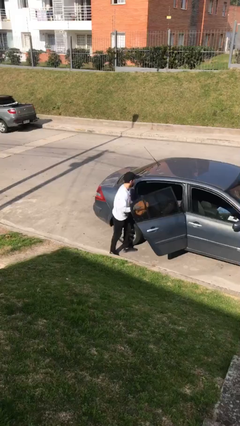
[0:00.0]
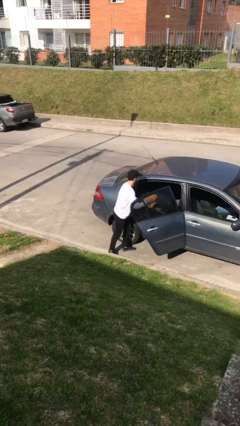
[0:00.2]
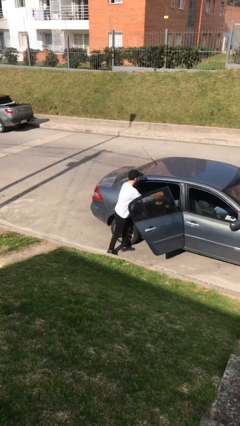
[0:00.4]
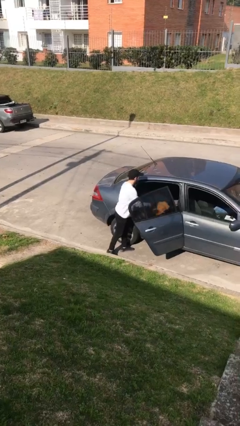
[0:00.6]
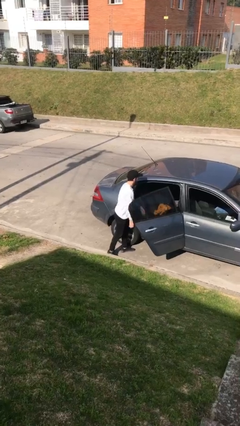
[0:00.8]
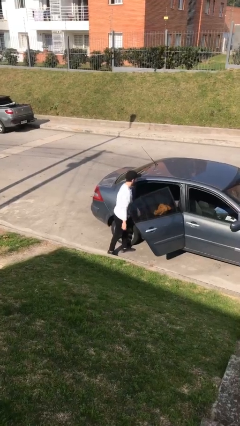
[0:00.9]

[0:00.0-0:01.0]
person loads car

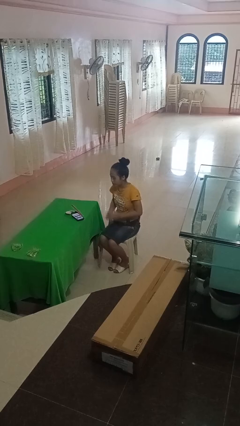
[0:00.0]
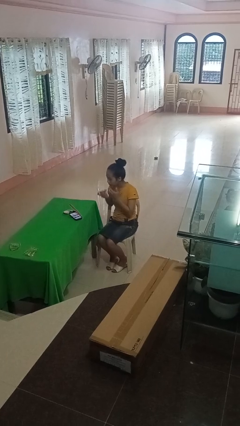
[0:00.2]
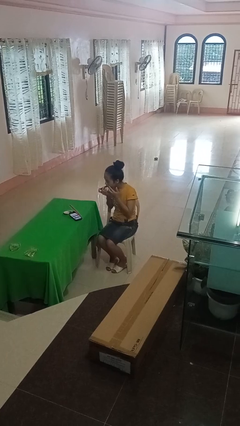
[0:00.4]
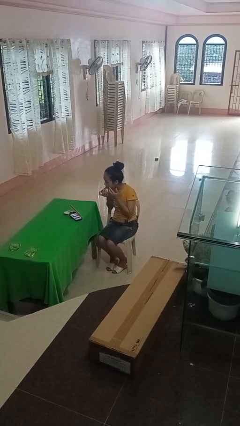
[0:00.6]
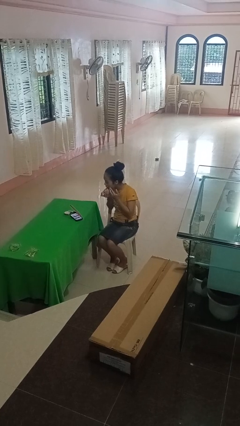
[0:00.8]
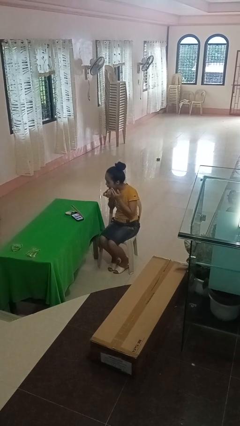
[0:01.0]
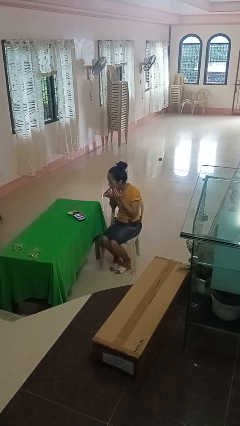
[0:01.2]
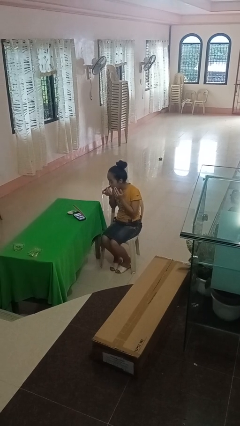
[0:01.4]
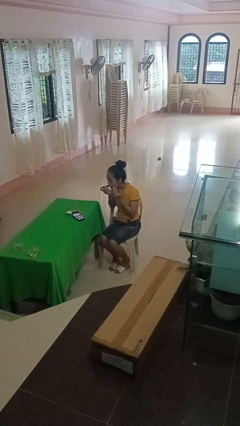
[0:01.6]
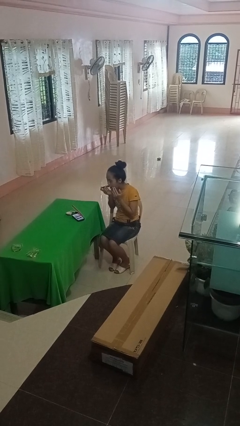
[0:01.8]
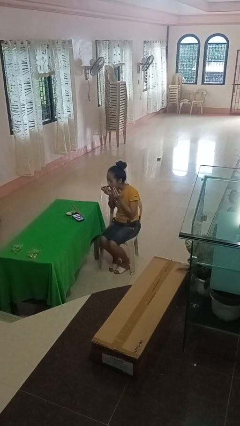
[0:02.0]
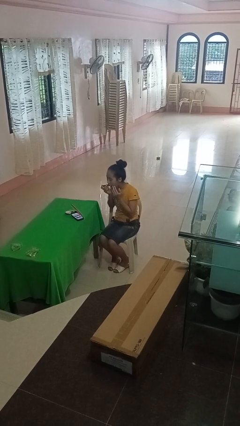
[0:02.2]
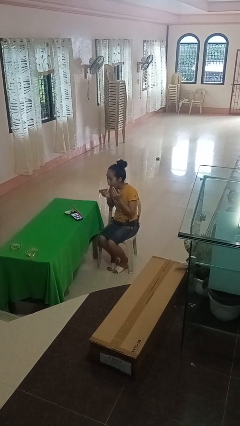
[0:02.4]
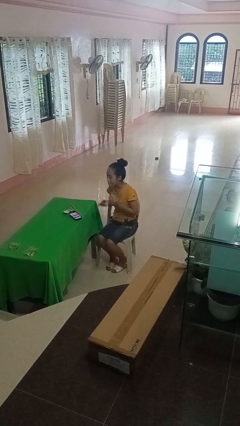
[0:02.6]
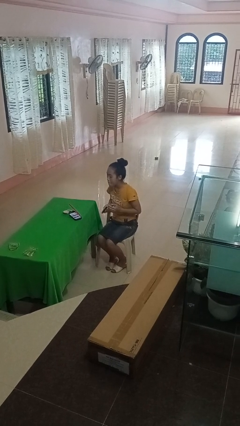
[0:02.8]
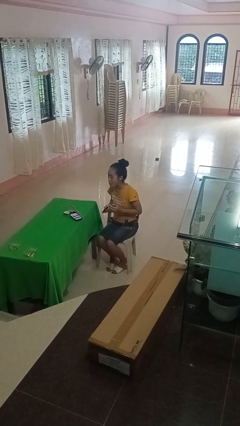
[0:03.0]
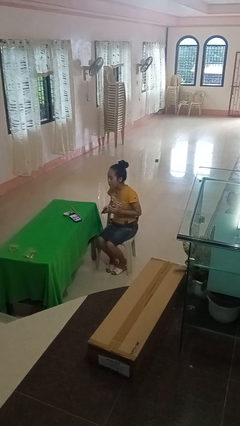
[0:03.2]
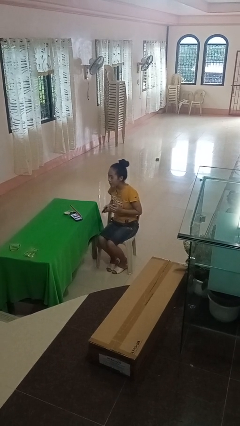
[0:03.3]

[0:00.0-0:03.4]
person applies lip makeup

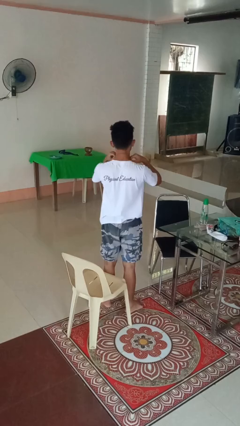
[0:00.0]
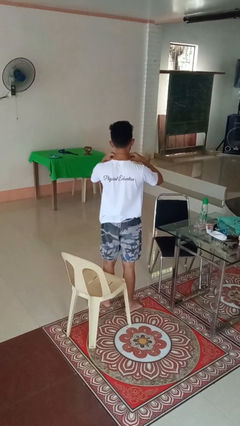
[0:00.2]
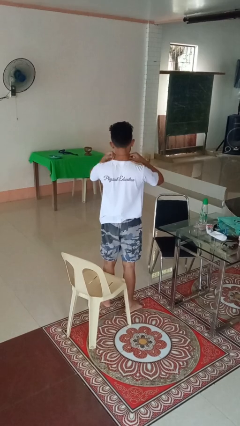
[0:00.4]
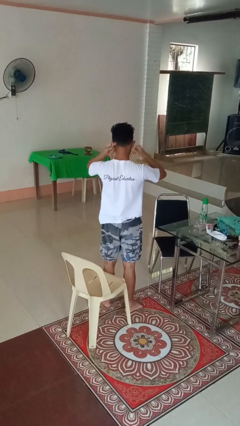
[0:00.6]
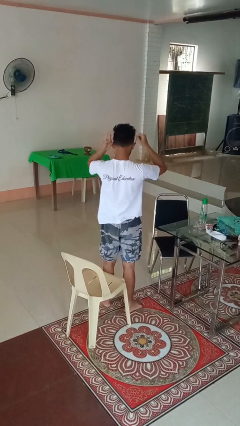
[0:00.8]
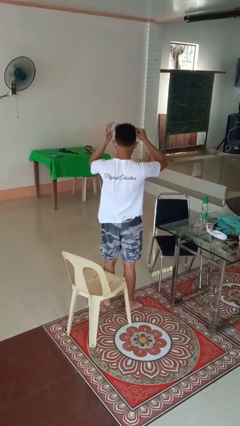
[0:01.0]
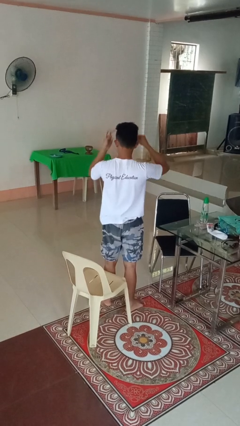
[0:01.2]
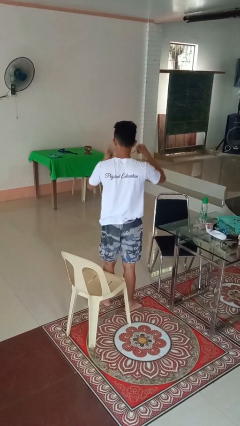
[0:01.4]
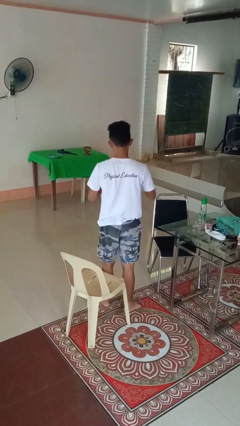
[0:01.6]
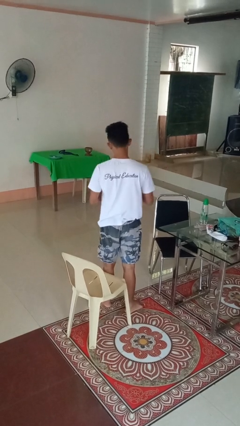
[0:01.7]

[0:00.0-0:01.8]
person takes off necklace

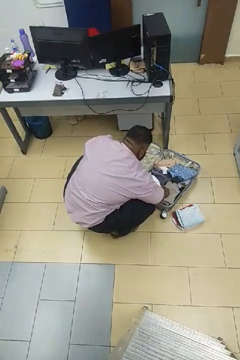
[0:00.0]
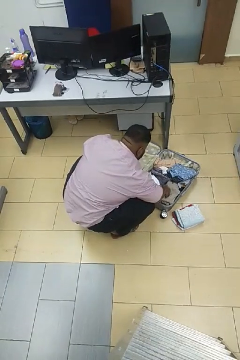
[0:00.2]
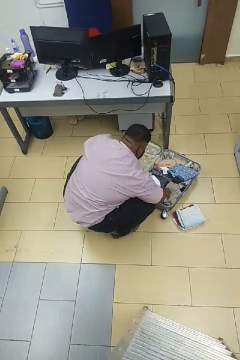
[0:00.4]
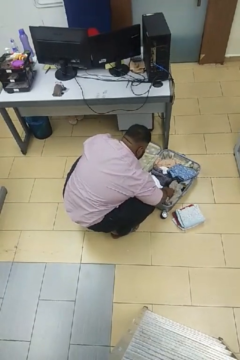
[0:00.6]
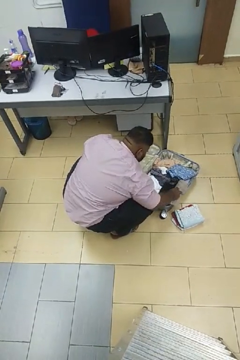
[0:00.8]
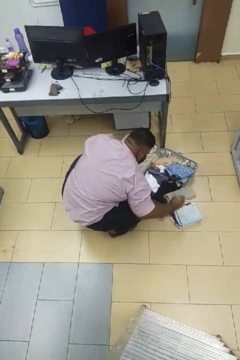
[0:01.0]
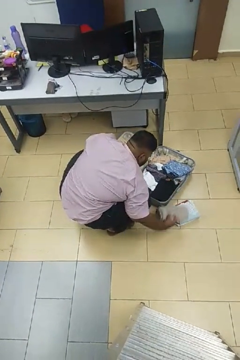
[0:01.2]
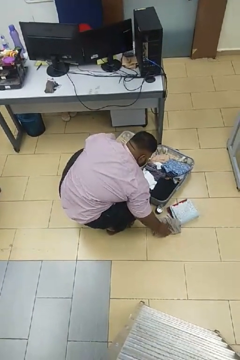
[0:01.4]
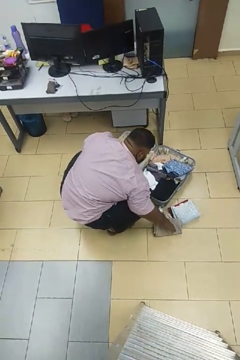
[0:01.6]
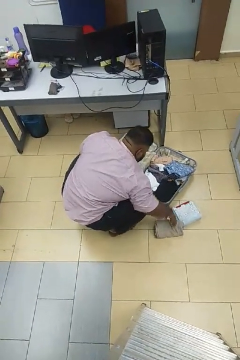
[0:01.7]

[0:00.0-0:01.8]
person unloads clothes from suitcase

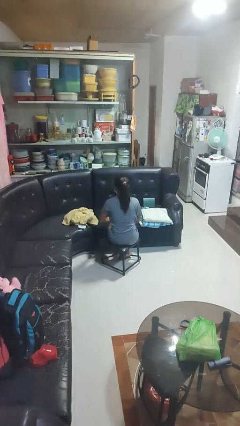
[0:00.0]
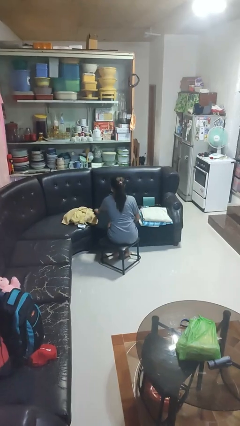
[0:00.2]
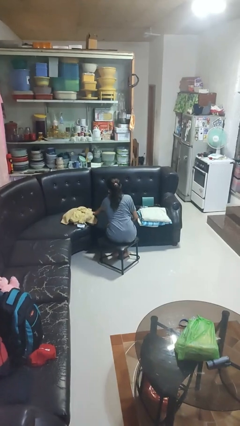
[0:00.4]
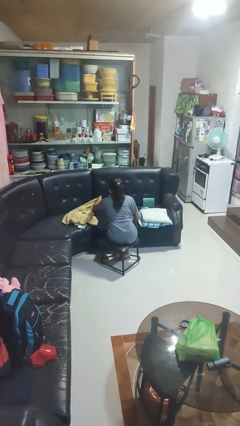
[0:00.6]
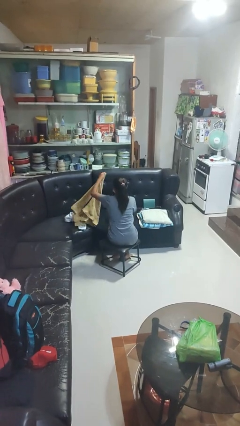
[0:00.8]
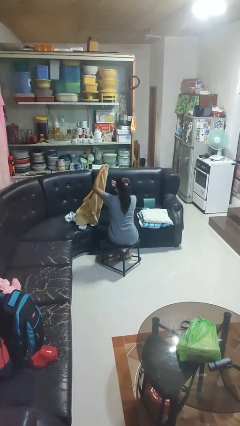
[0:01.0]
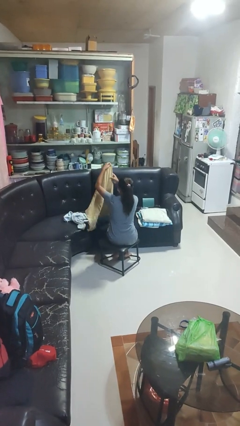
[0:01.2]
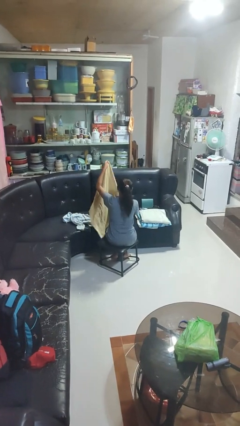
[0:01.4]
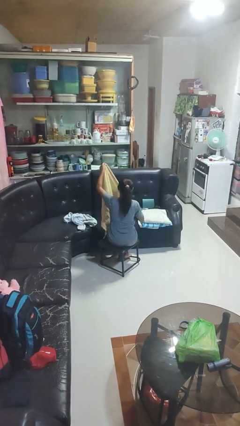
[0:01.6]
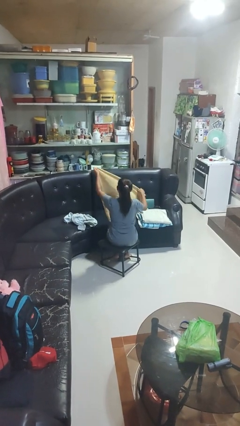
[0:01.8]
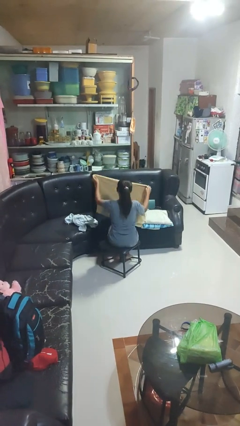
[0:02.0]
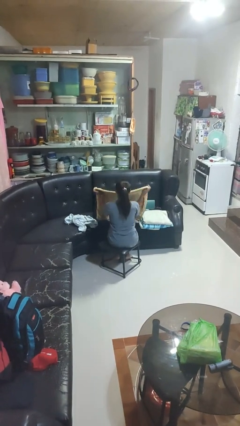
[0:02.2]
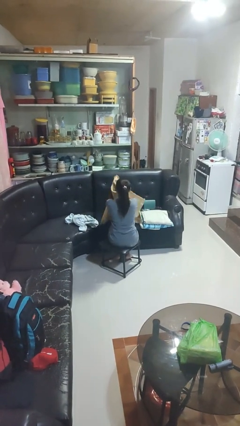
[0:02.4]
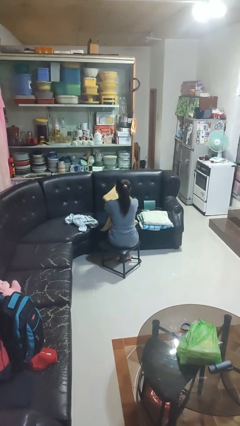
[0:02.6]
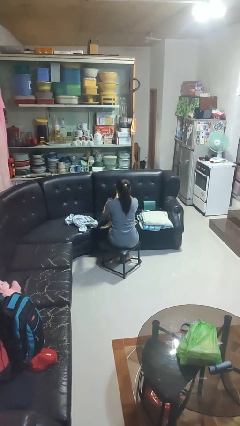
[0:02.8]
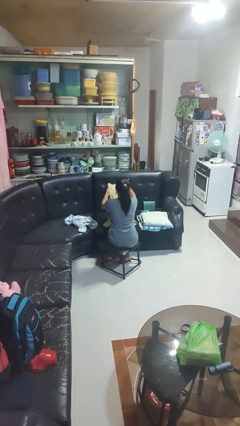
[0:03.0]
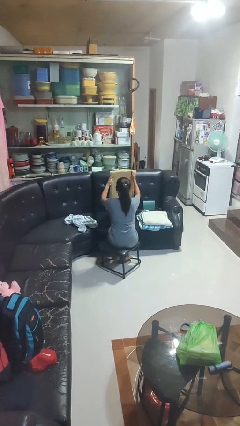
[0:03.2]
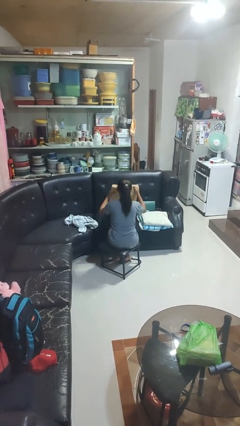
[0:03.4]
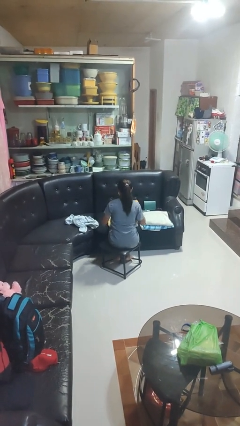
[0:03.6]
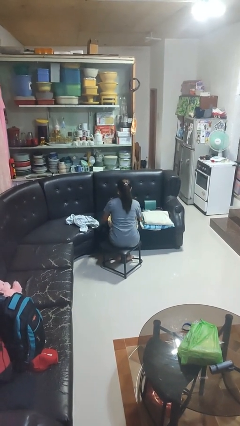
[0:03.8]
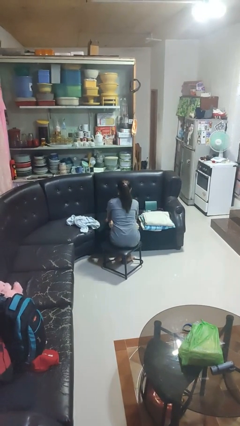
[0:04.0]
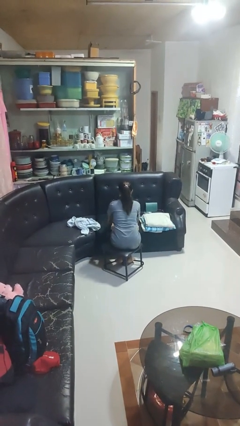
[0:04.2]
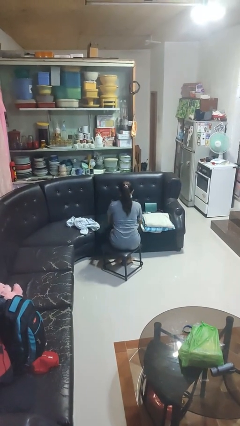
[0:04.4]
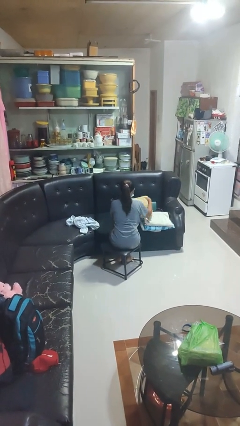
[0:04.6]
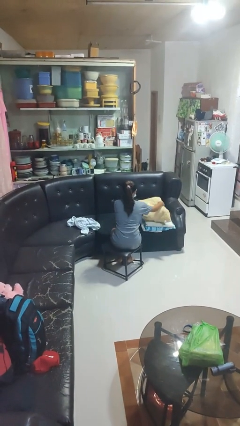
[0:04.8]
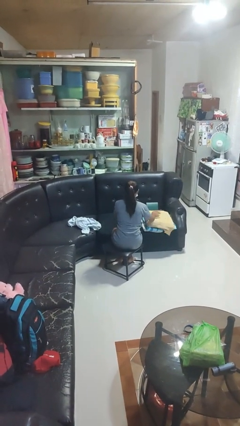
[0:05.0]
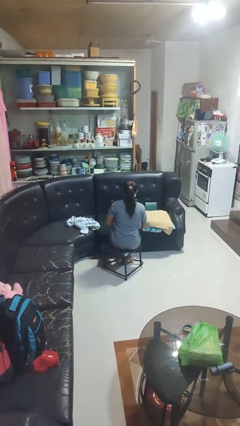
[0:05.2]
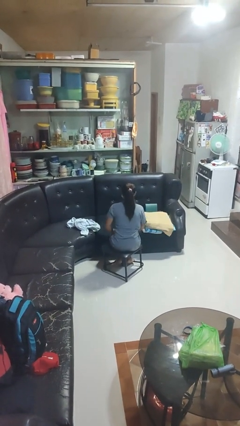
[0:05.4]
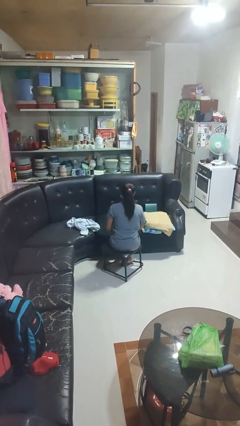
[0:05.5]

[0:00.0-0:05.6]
person folds towel

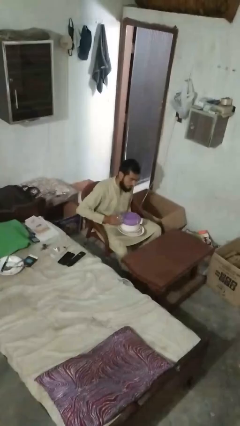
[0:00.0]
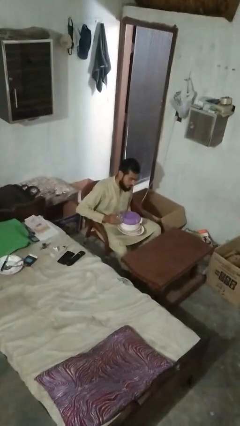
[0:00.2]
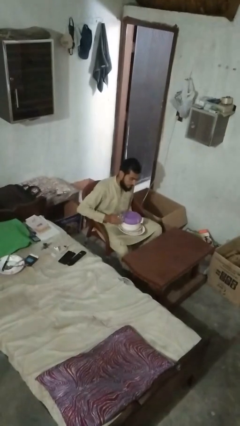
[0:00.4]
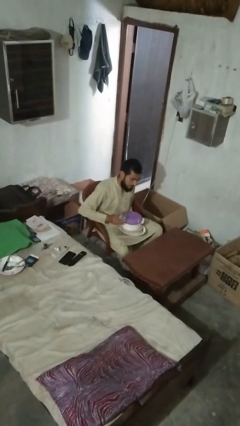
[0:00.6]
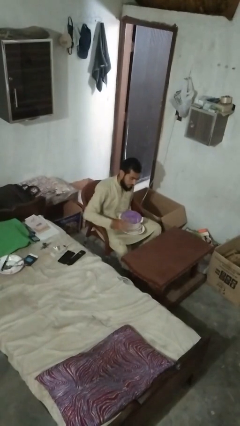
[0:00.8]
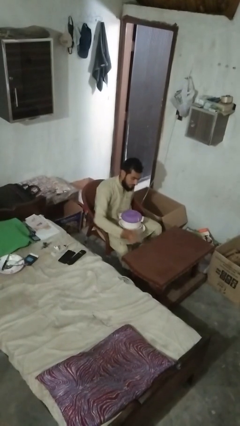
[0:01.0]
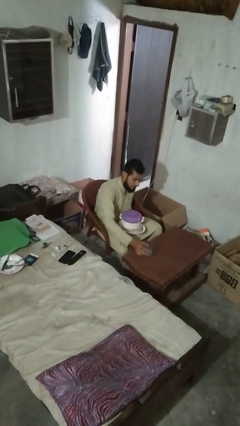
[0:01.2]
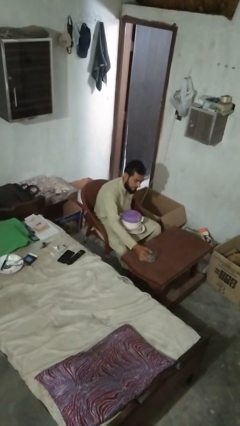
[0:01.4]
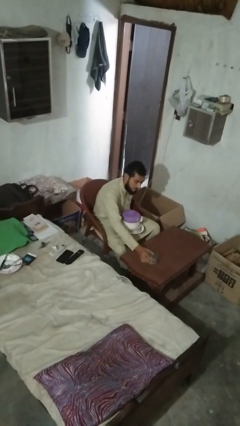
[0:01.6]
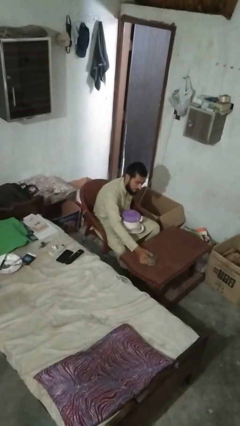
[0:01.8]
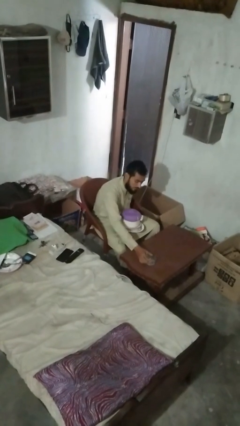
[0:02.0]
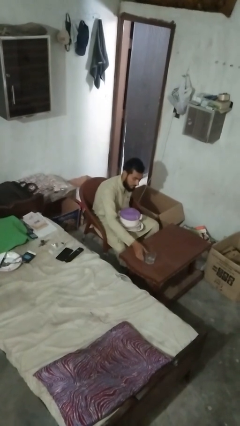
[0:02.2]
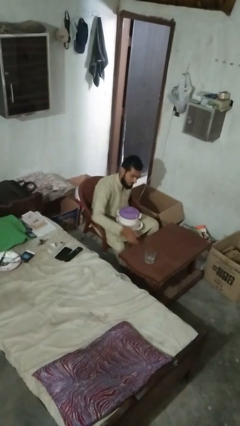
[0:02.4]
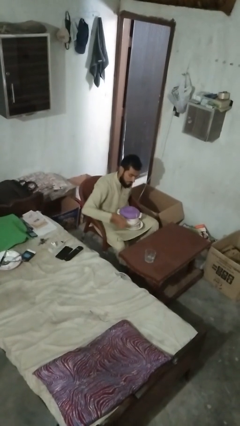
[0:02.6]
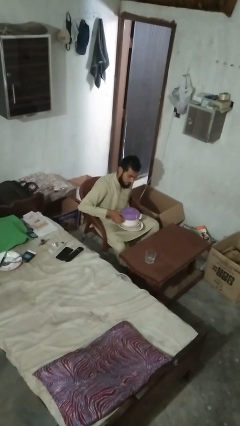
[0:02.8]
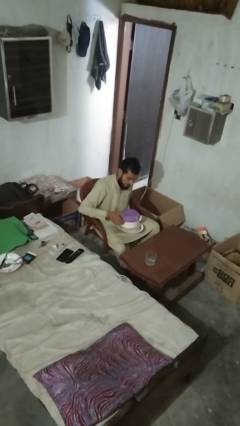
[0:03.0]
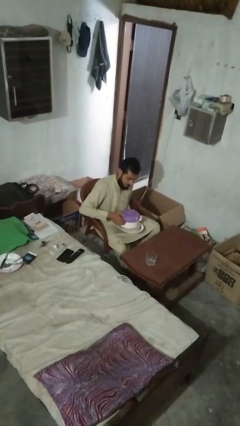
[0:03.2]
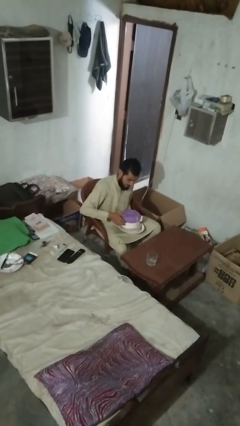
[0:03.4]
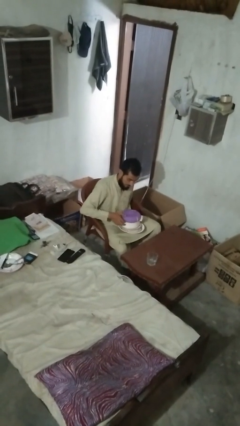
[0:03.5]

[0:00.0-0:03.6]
person sets table
